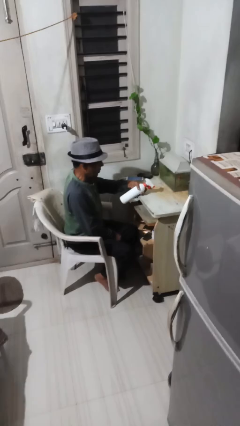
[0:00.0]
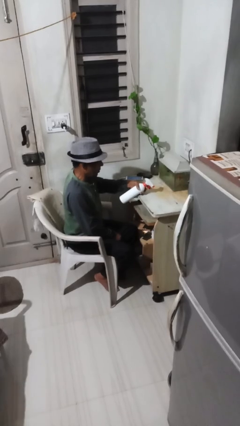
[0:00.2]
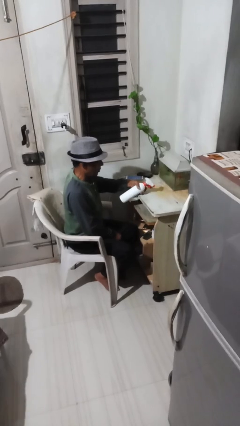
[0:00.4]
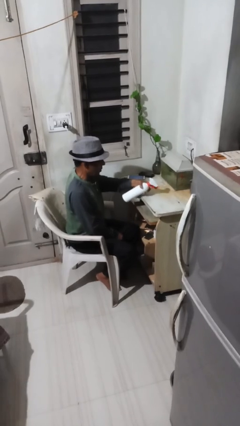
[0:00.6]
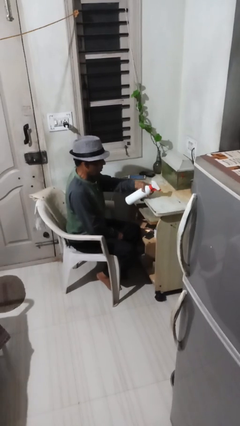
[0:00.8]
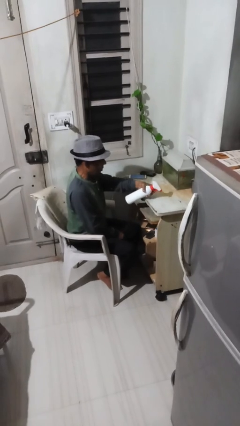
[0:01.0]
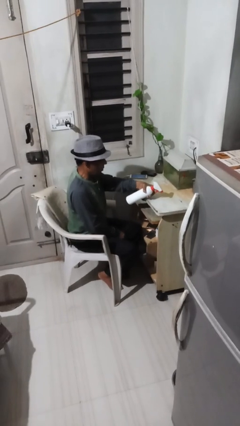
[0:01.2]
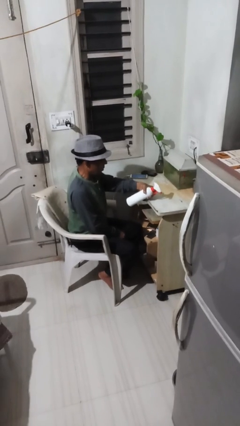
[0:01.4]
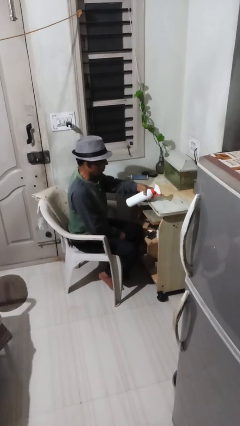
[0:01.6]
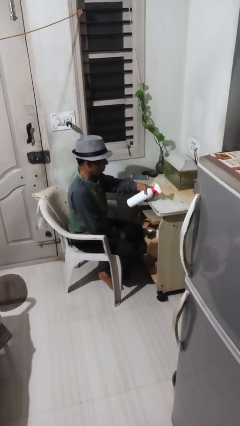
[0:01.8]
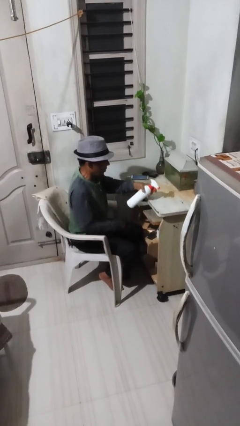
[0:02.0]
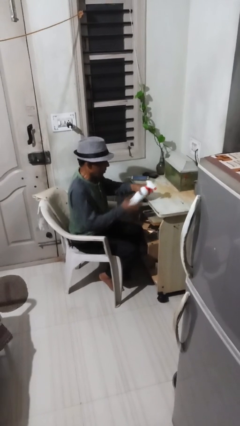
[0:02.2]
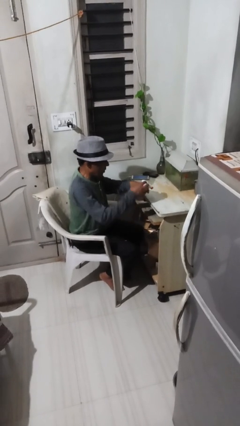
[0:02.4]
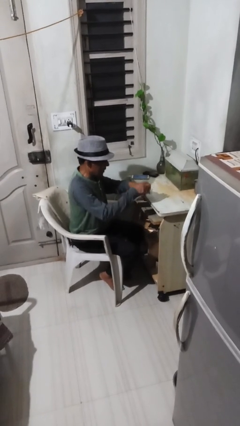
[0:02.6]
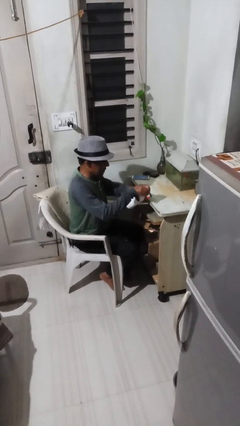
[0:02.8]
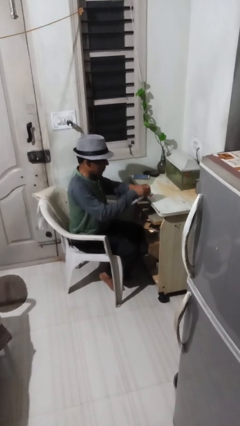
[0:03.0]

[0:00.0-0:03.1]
person sprays from bottle

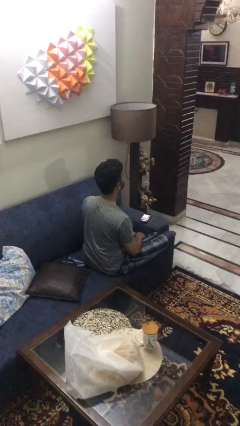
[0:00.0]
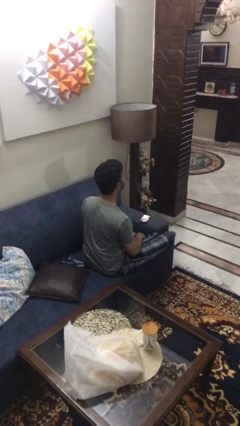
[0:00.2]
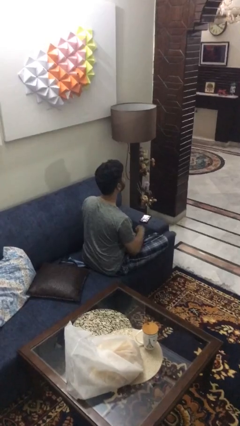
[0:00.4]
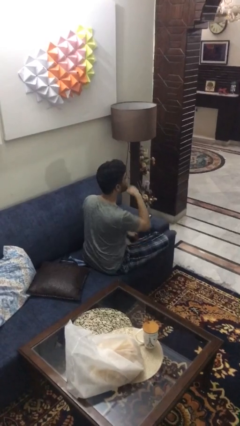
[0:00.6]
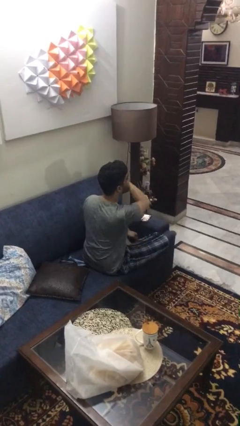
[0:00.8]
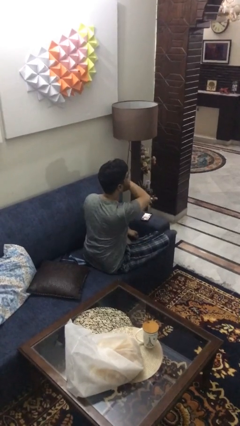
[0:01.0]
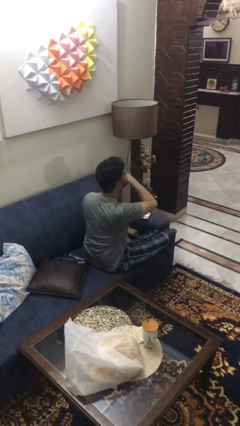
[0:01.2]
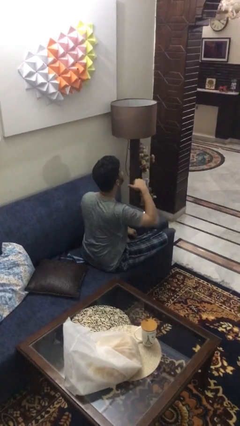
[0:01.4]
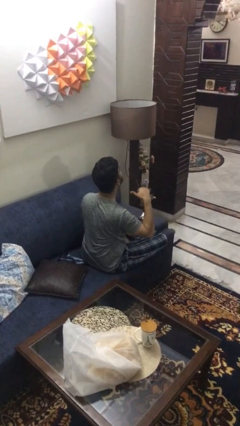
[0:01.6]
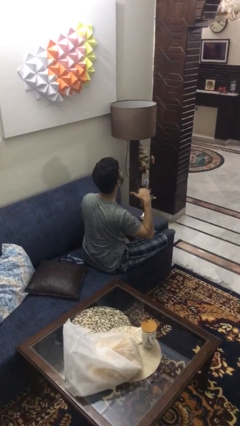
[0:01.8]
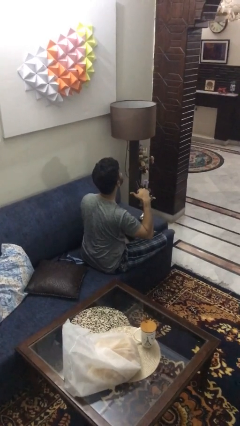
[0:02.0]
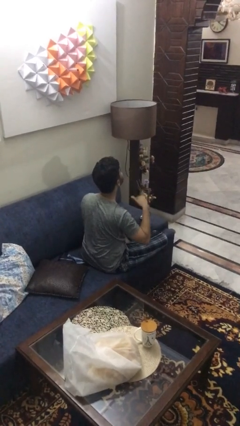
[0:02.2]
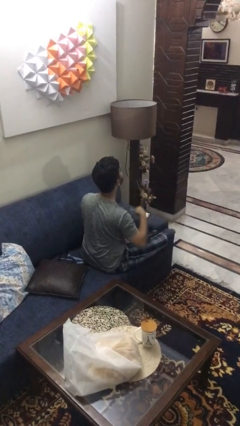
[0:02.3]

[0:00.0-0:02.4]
person gestures cut

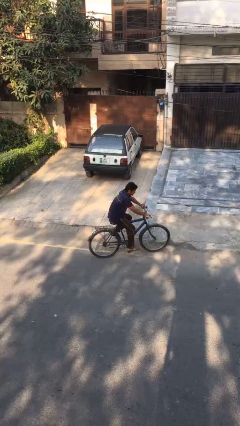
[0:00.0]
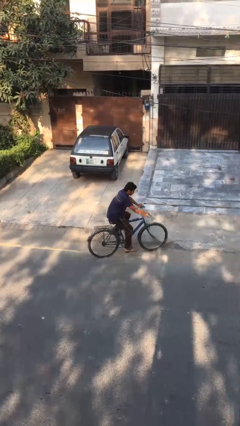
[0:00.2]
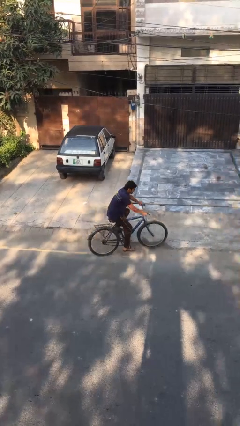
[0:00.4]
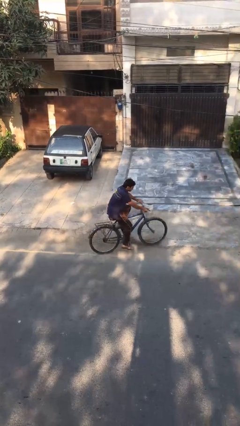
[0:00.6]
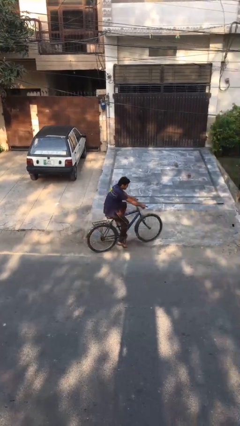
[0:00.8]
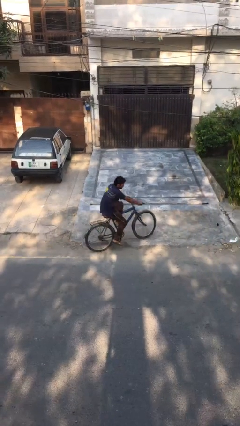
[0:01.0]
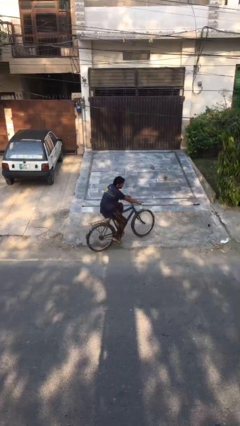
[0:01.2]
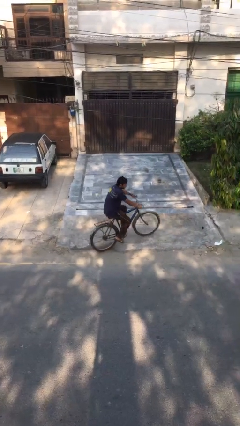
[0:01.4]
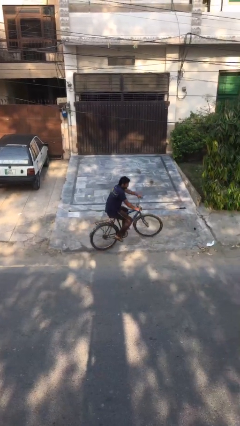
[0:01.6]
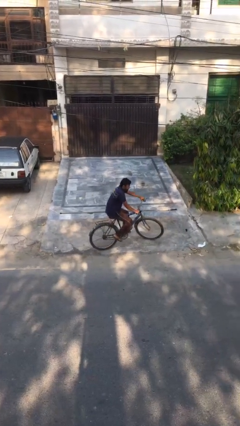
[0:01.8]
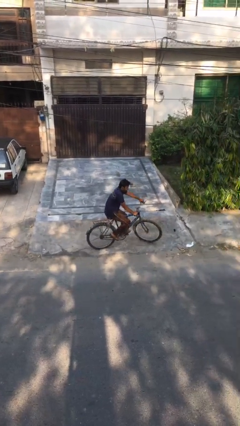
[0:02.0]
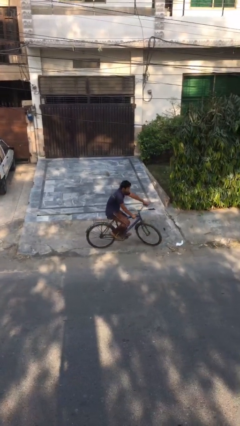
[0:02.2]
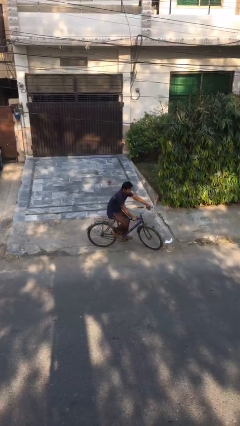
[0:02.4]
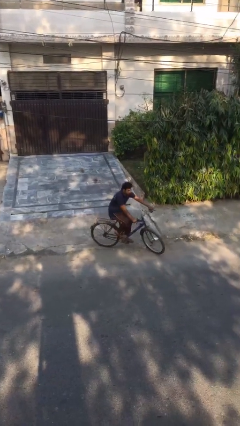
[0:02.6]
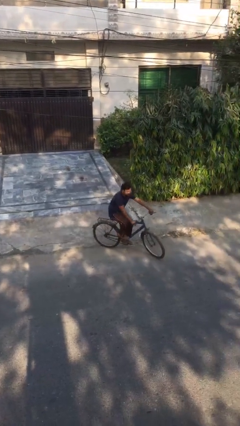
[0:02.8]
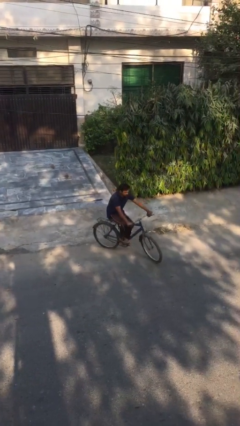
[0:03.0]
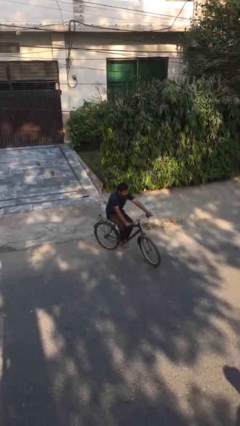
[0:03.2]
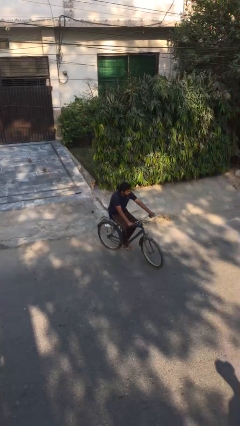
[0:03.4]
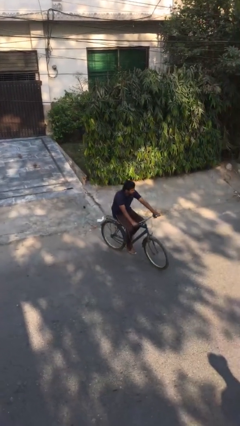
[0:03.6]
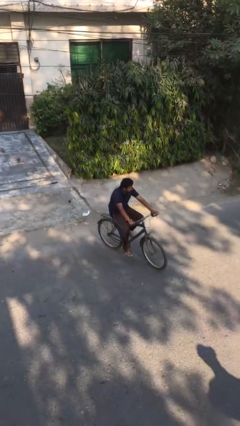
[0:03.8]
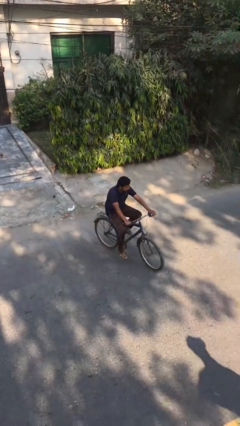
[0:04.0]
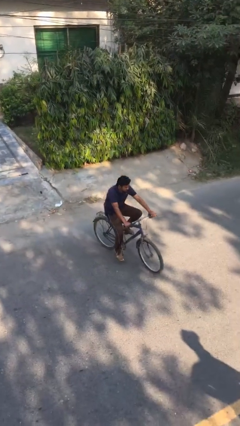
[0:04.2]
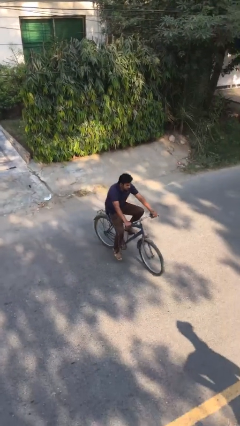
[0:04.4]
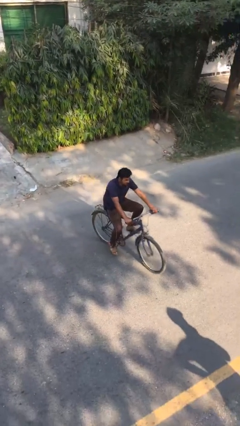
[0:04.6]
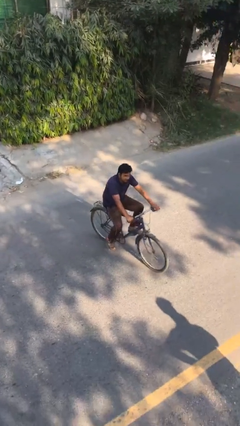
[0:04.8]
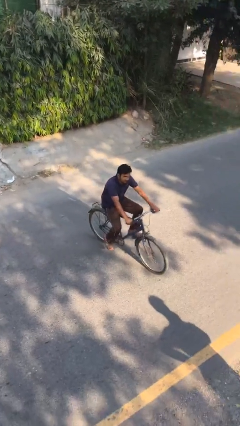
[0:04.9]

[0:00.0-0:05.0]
person rides bicycle

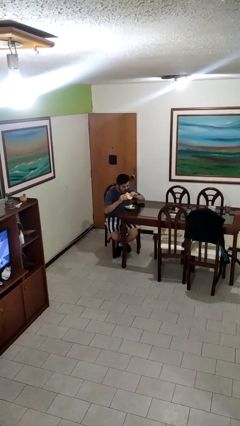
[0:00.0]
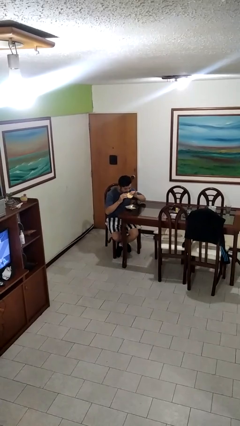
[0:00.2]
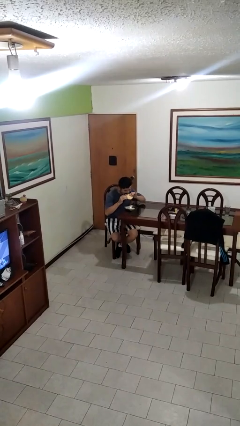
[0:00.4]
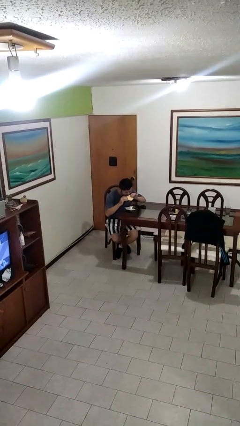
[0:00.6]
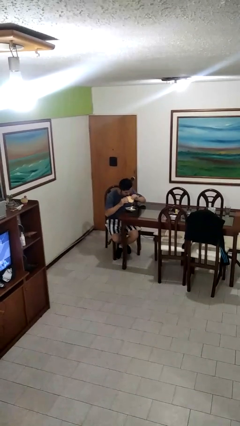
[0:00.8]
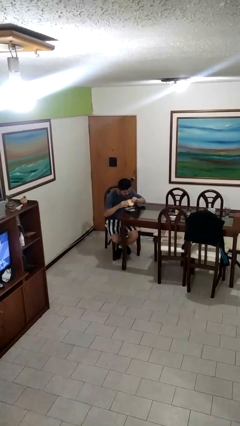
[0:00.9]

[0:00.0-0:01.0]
person eats with hands

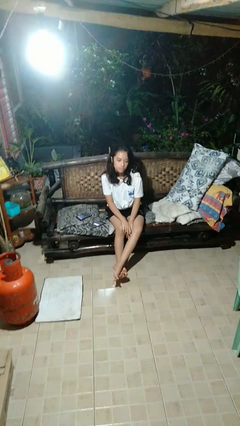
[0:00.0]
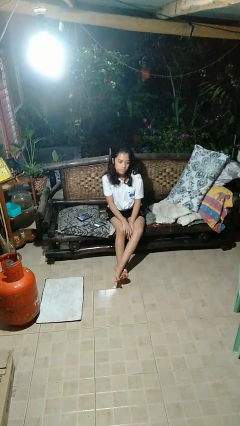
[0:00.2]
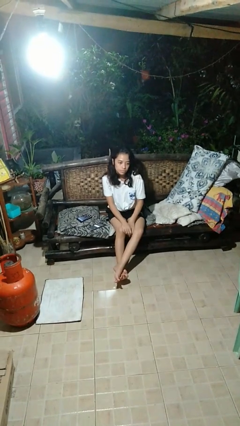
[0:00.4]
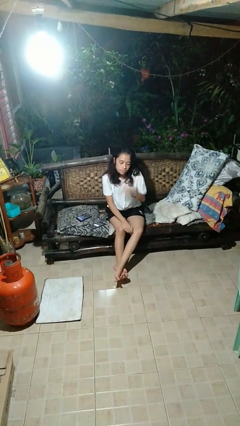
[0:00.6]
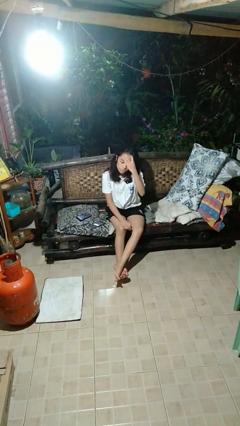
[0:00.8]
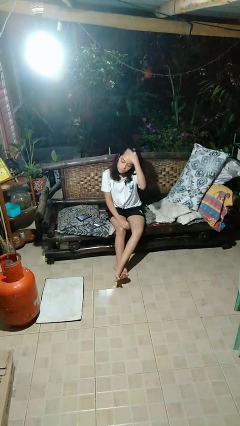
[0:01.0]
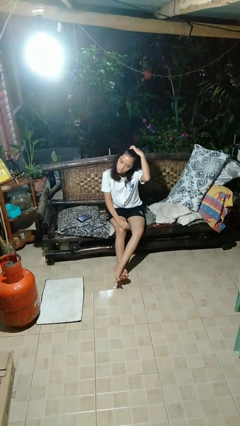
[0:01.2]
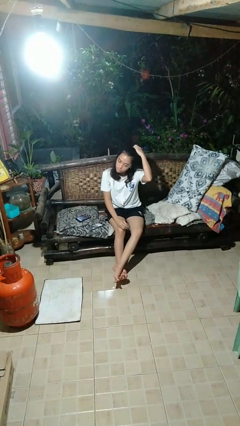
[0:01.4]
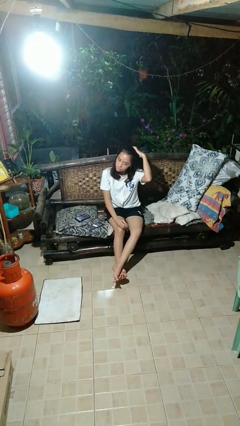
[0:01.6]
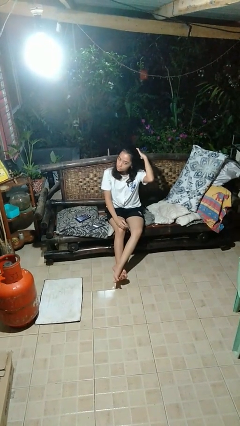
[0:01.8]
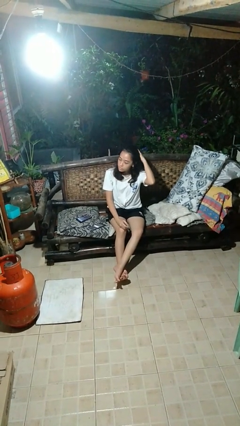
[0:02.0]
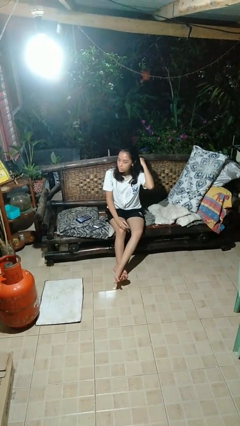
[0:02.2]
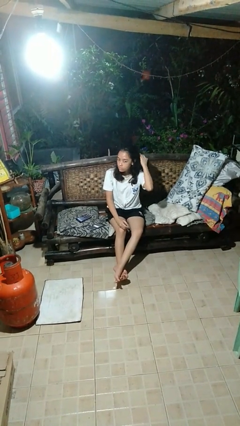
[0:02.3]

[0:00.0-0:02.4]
person strokes hair

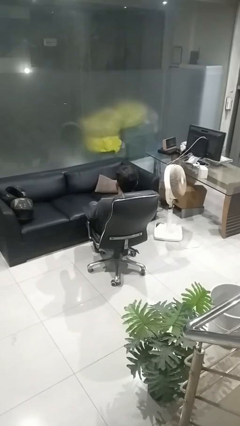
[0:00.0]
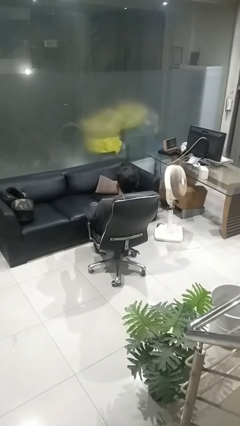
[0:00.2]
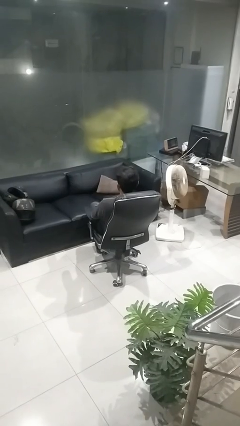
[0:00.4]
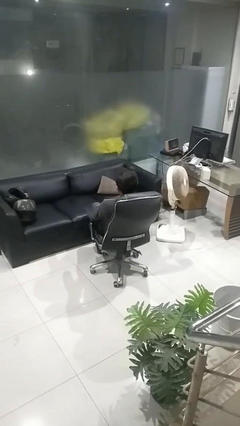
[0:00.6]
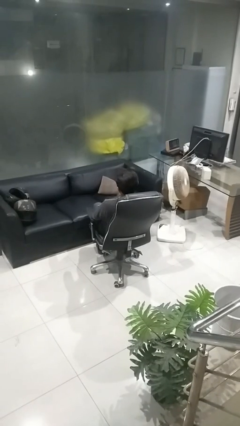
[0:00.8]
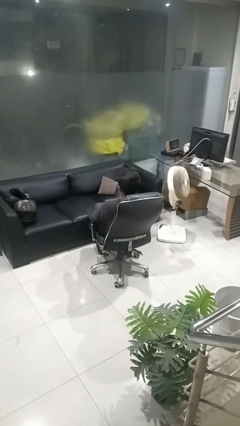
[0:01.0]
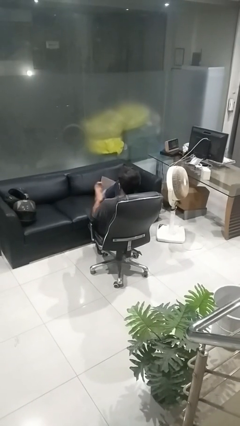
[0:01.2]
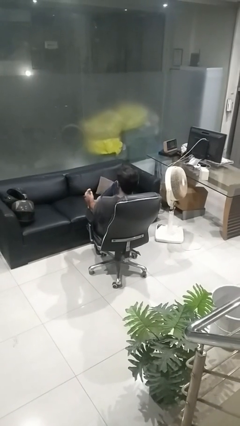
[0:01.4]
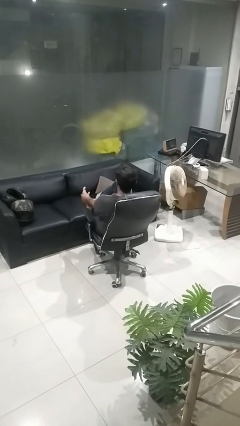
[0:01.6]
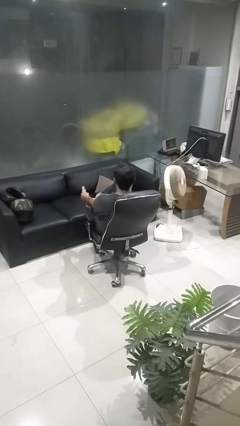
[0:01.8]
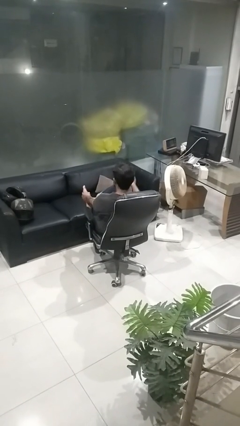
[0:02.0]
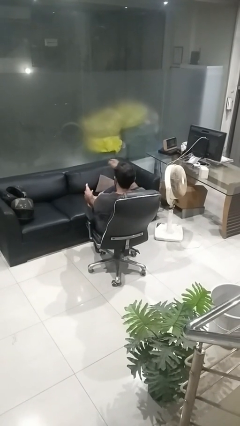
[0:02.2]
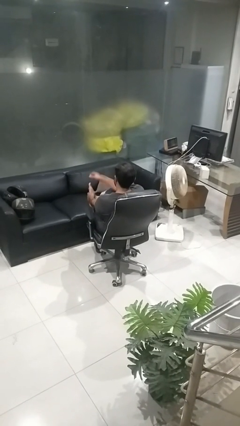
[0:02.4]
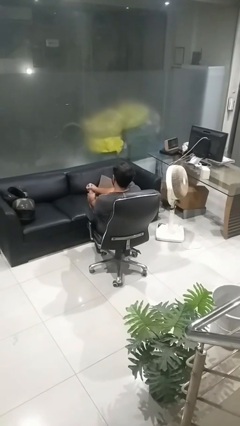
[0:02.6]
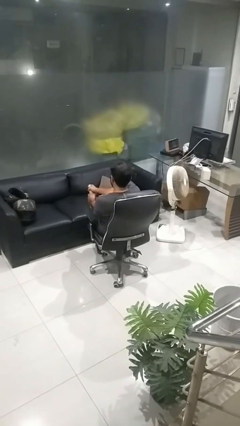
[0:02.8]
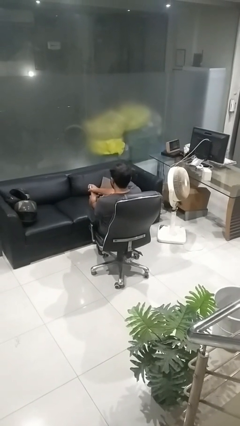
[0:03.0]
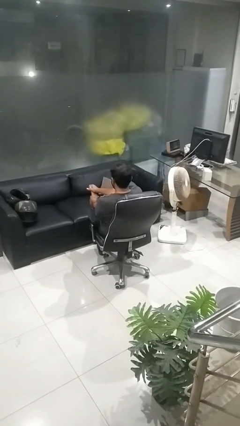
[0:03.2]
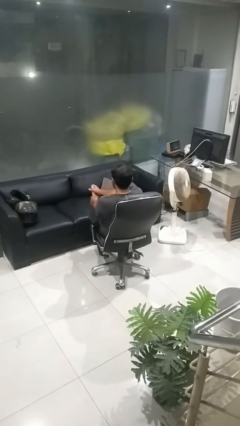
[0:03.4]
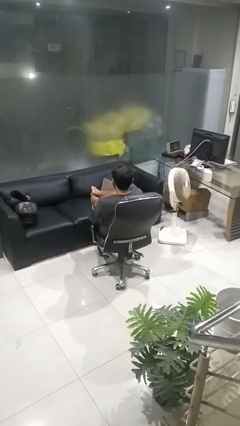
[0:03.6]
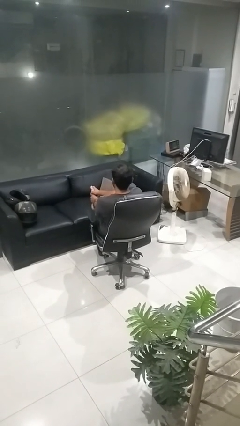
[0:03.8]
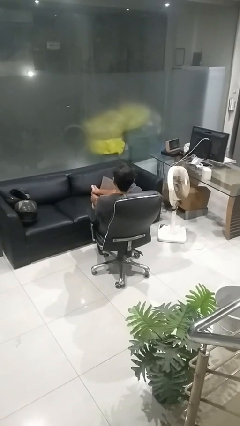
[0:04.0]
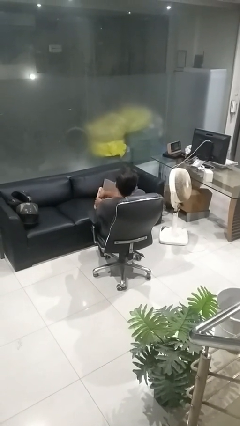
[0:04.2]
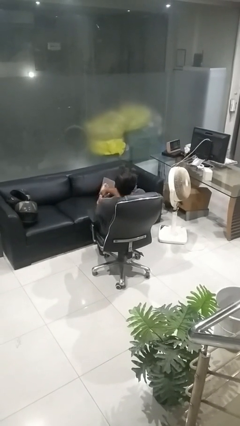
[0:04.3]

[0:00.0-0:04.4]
person rubs foot
